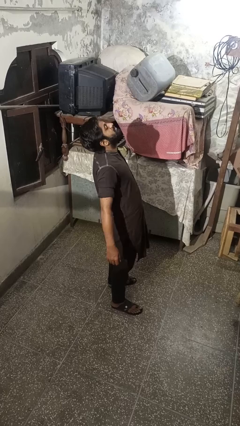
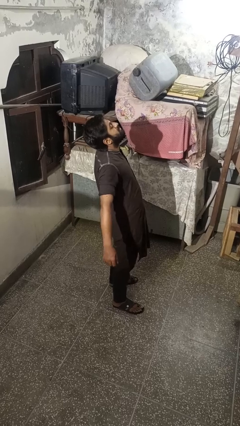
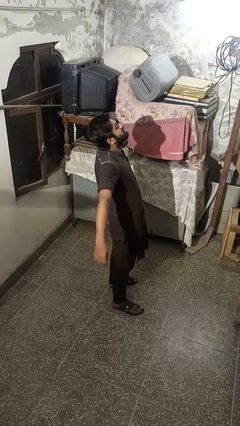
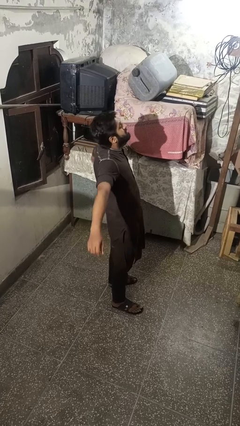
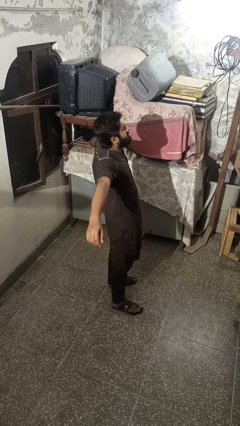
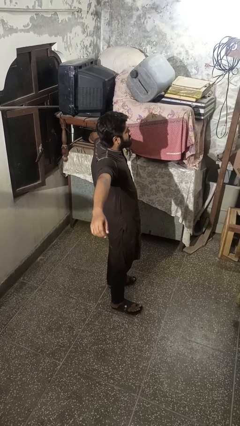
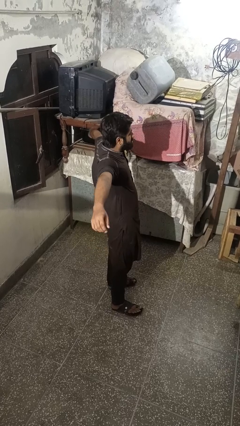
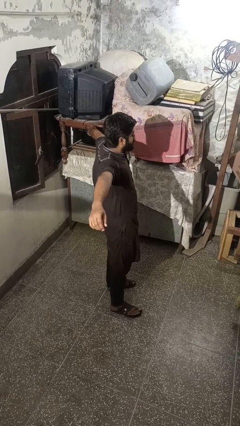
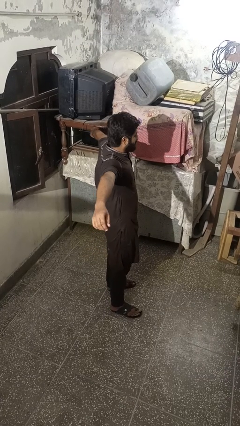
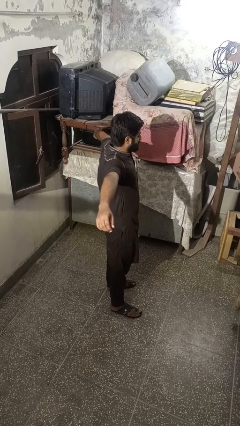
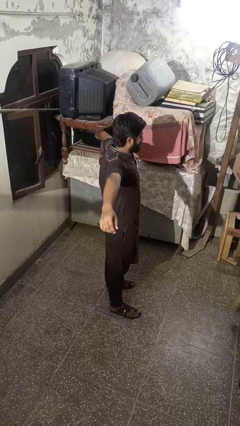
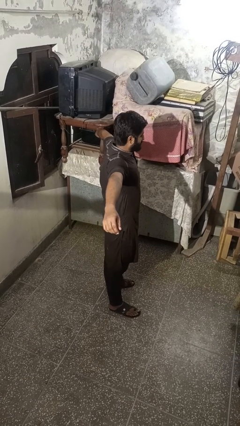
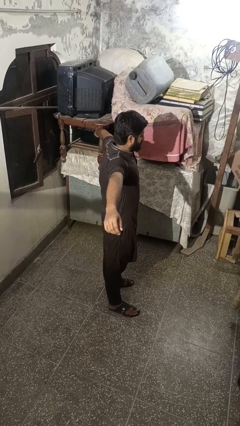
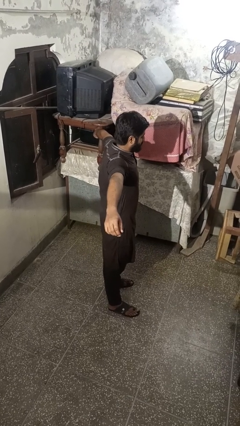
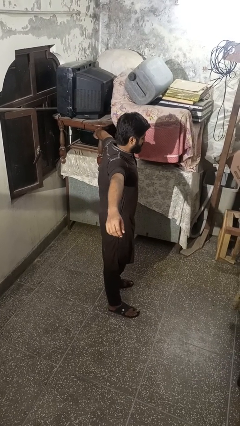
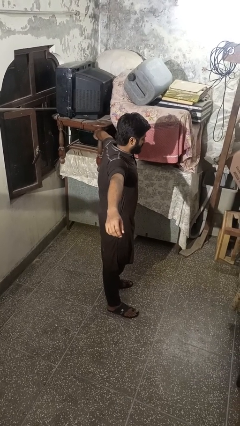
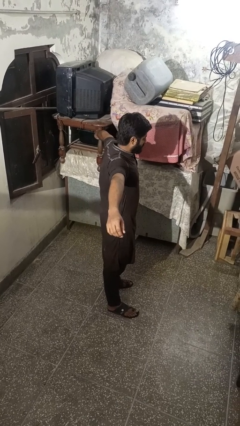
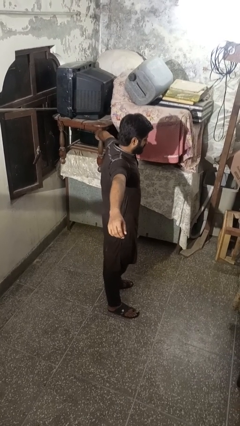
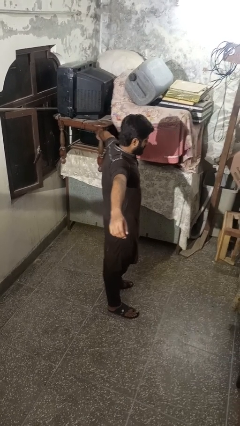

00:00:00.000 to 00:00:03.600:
person stretches arms to side

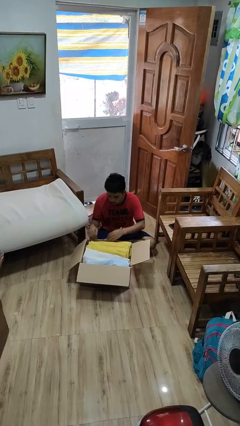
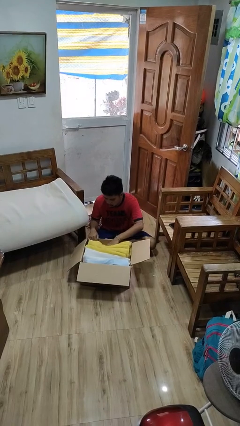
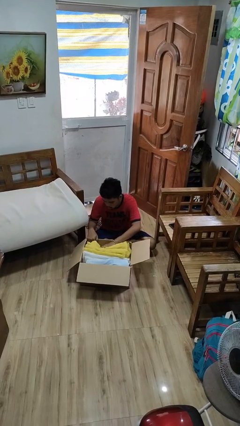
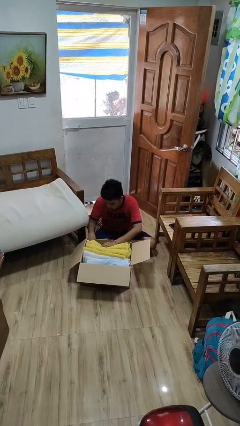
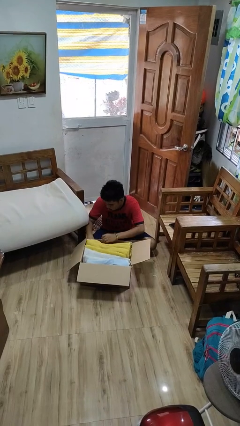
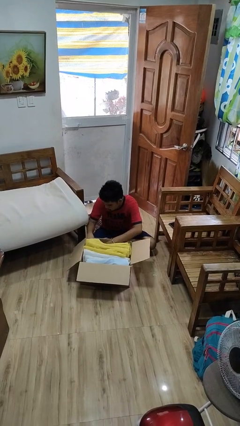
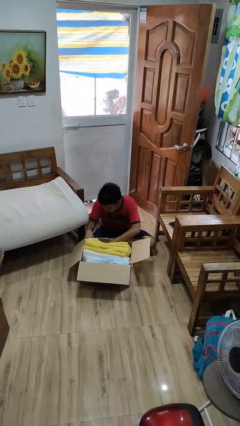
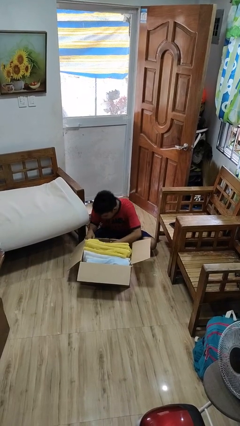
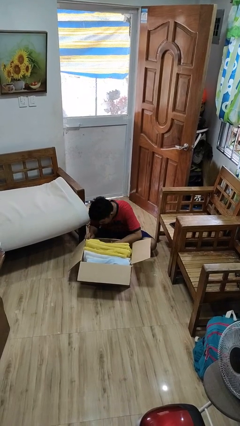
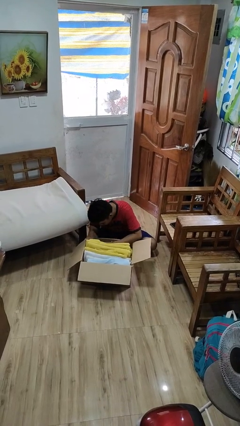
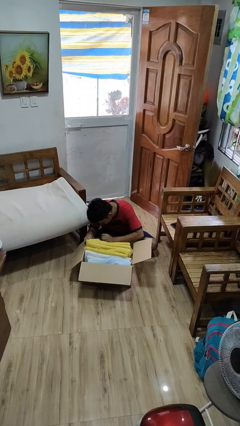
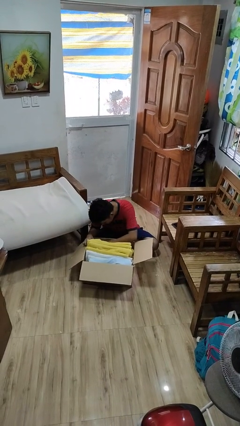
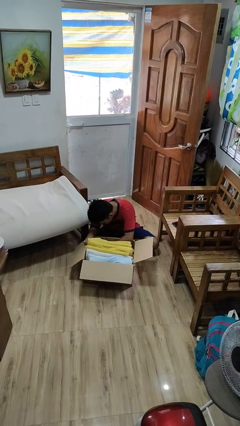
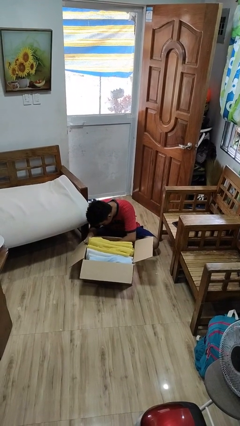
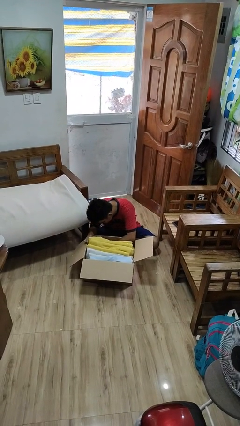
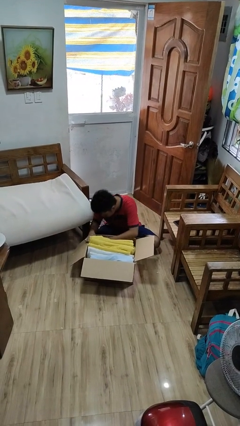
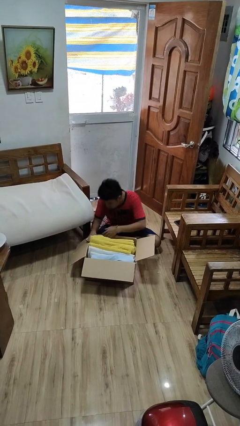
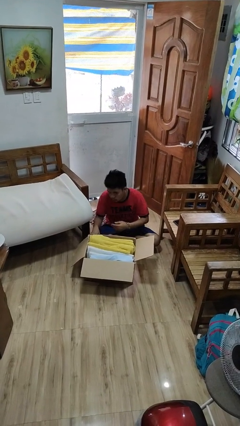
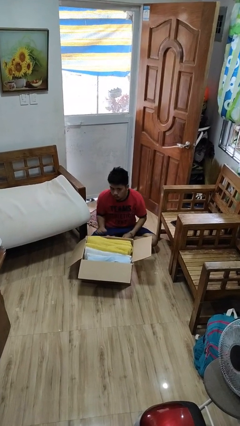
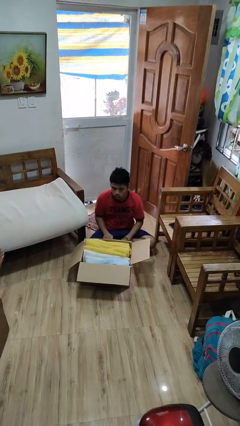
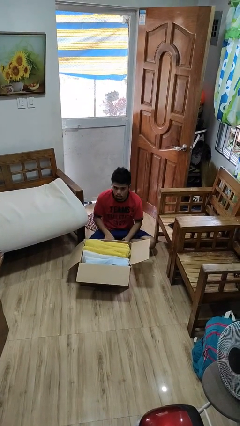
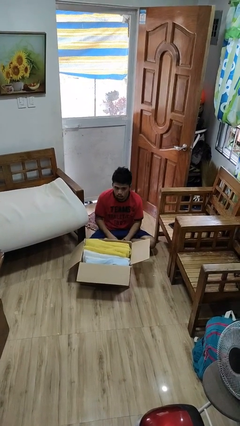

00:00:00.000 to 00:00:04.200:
person searches in box

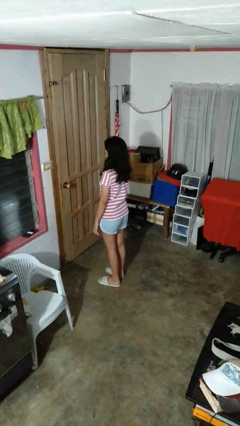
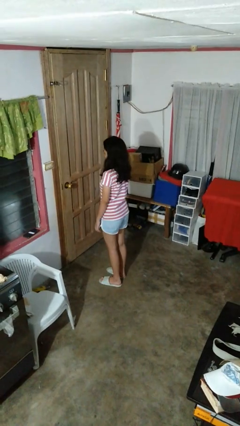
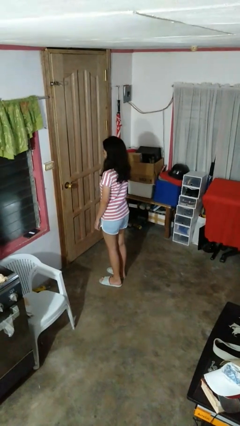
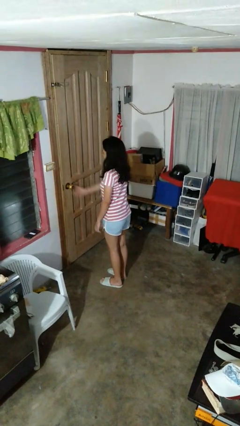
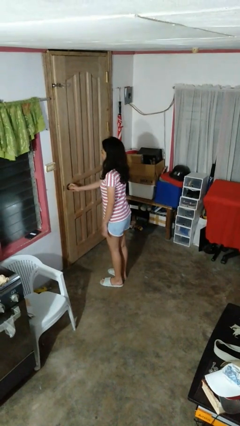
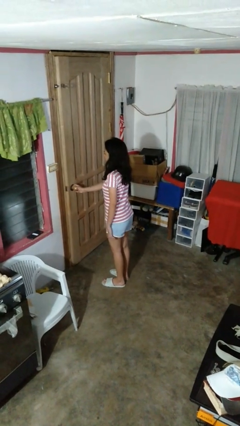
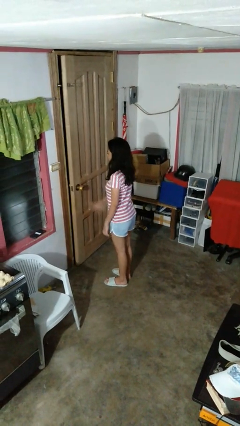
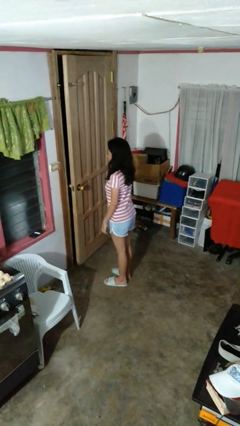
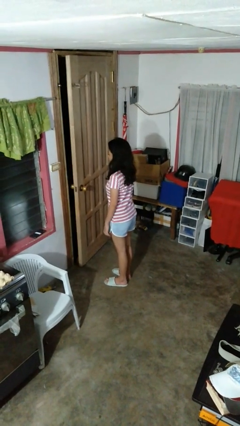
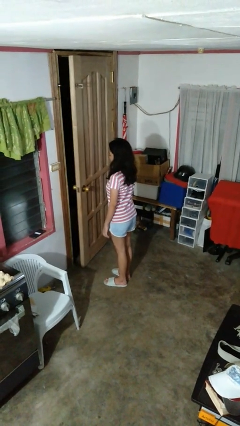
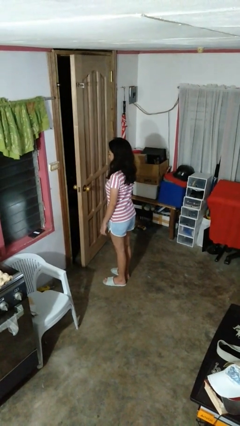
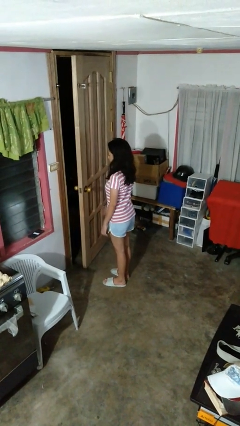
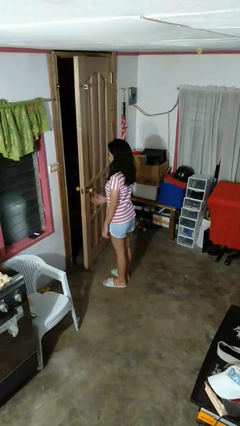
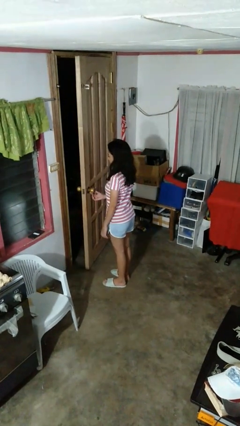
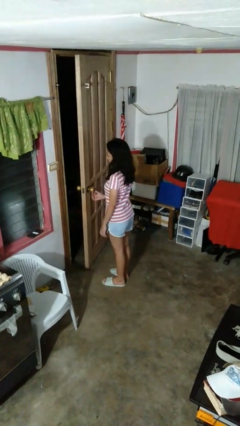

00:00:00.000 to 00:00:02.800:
person opens facility door

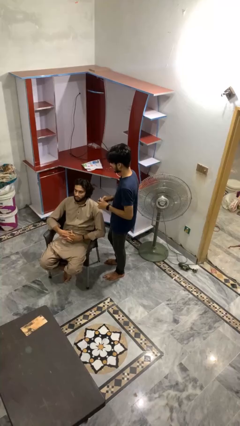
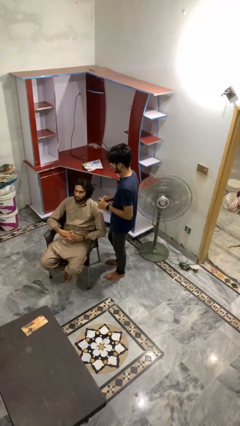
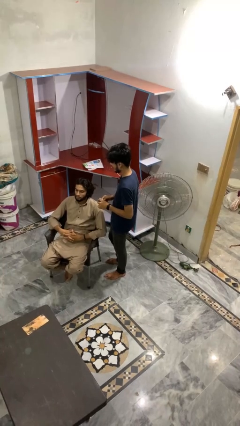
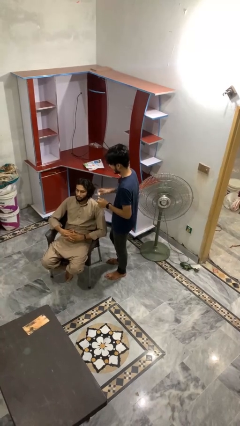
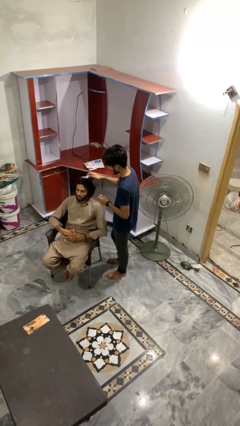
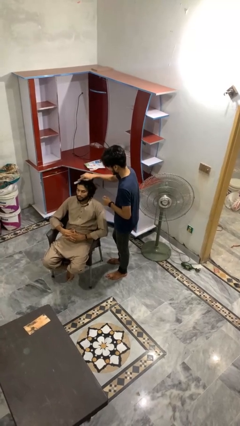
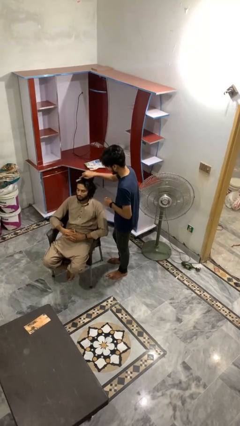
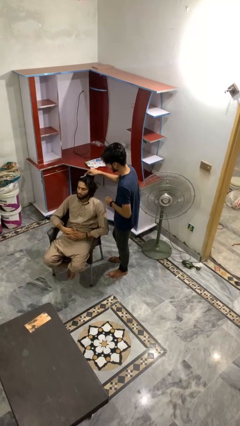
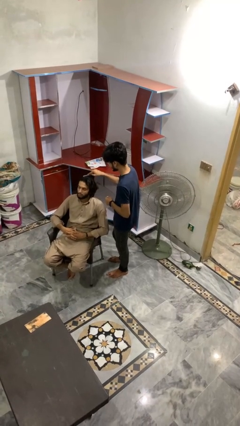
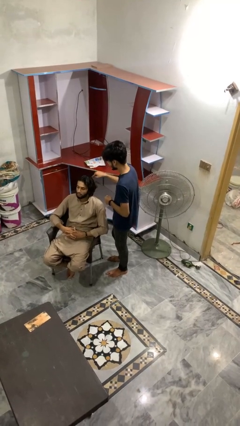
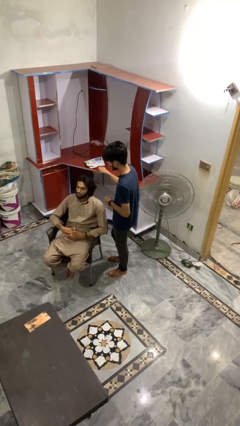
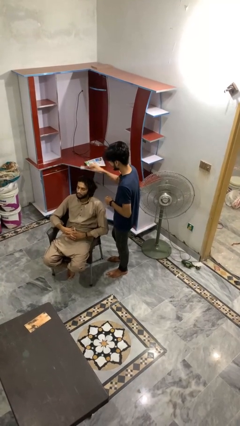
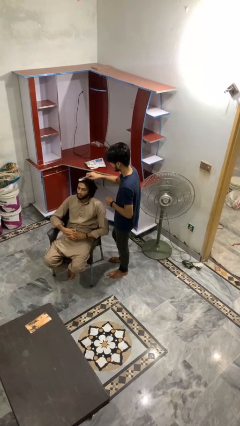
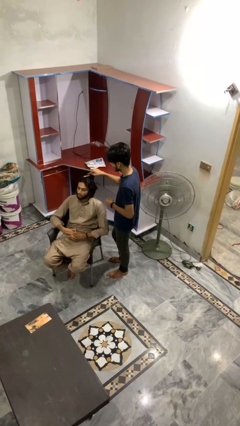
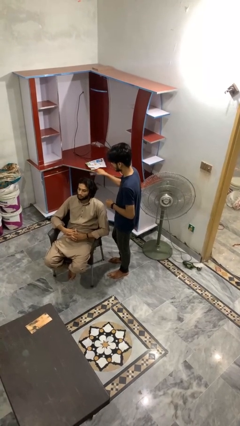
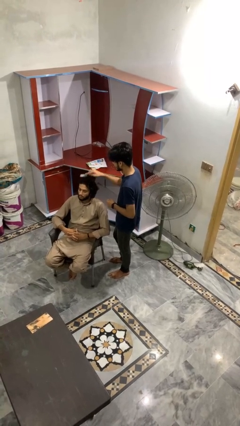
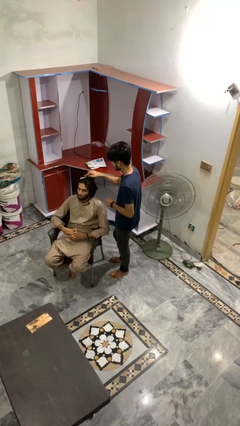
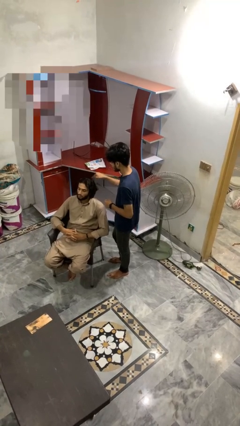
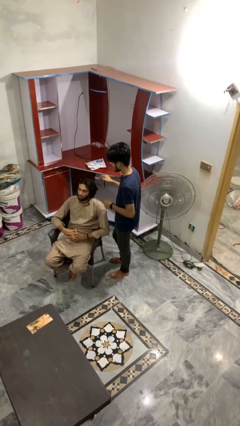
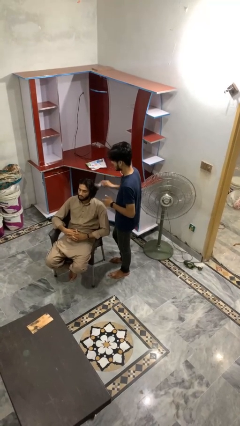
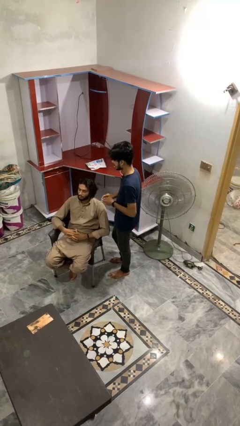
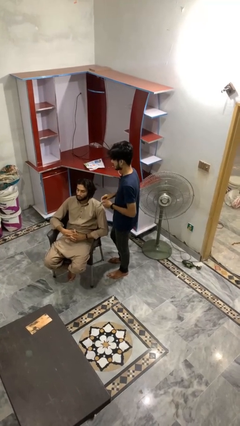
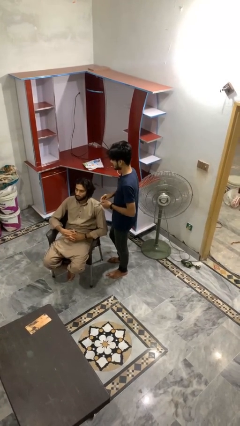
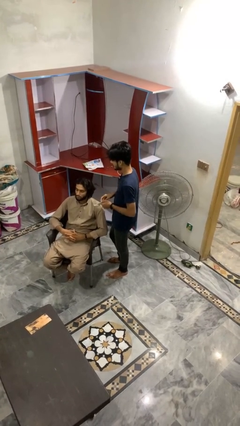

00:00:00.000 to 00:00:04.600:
person brushes hair of person

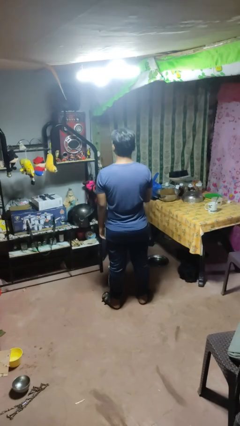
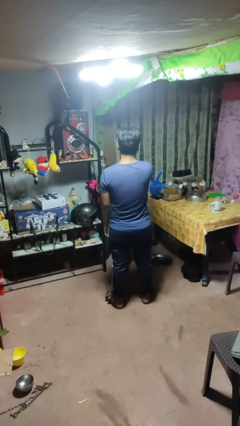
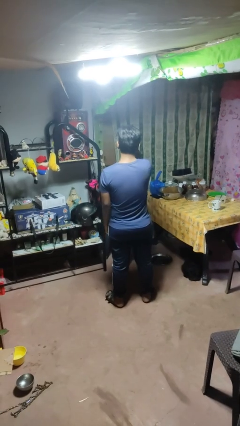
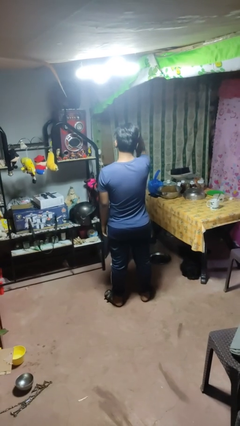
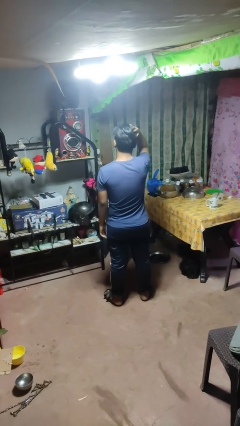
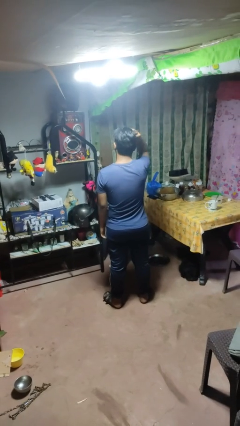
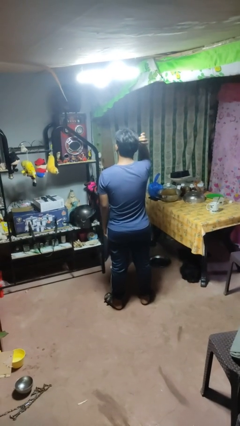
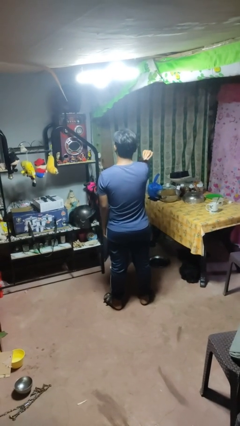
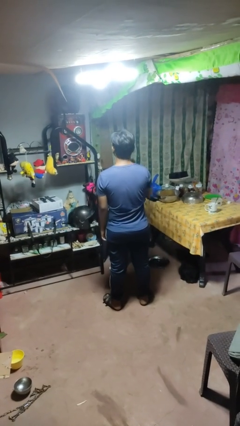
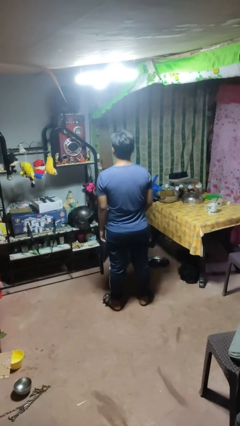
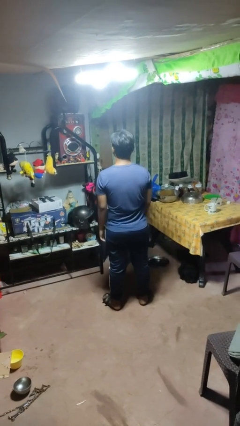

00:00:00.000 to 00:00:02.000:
person strokes hair

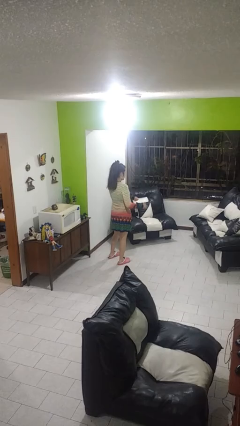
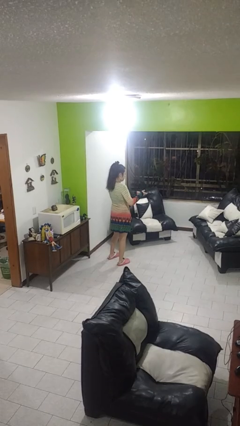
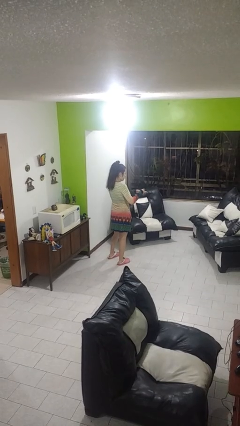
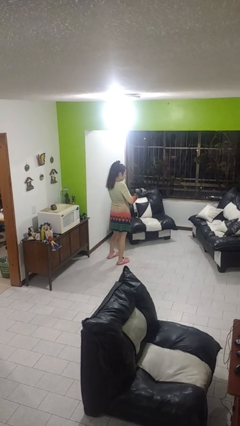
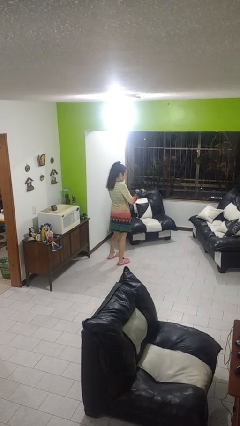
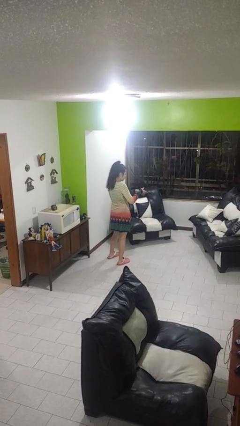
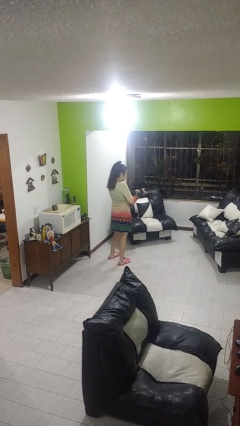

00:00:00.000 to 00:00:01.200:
person clips fingernails
